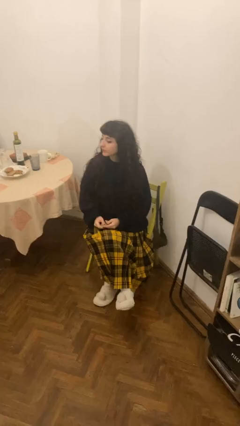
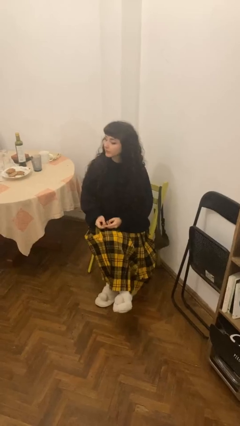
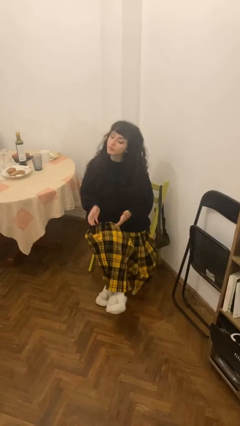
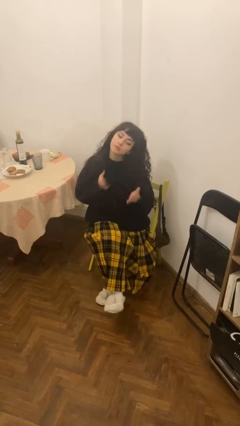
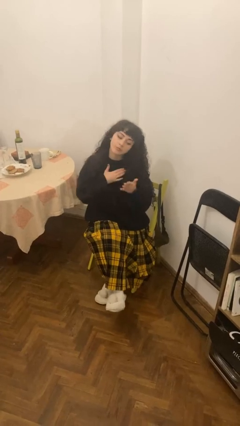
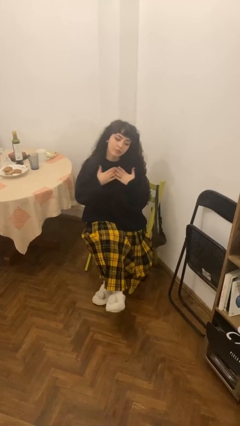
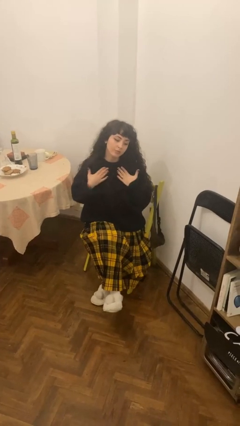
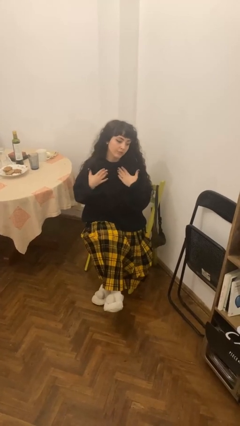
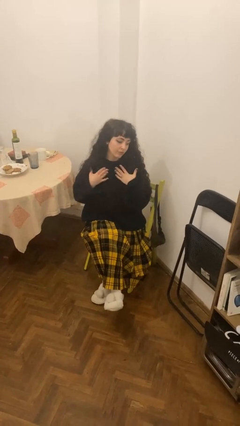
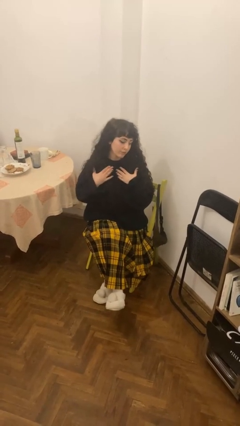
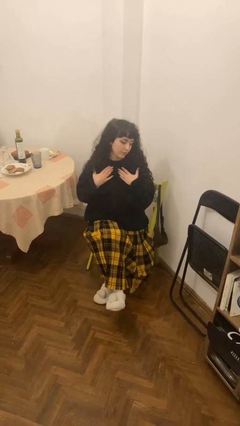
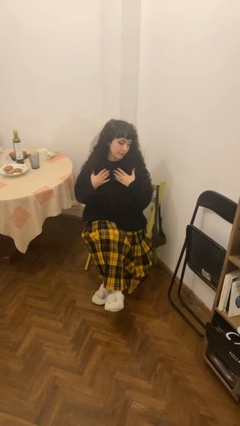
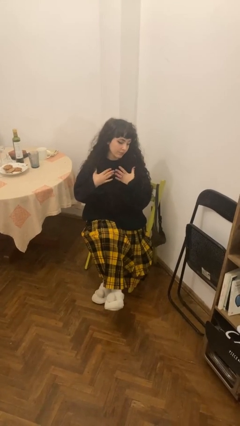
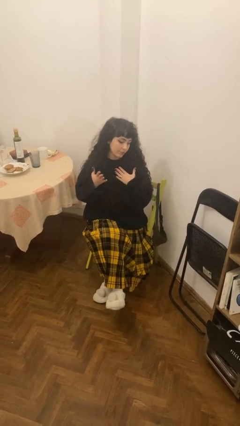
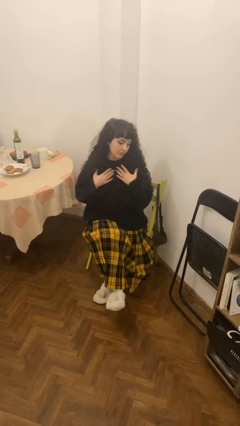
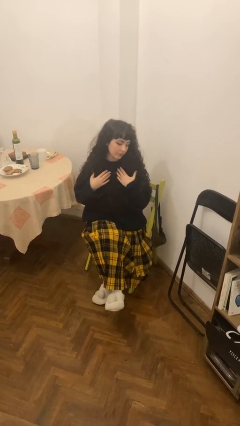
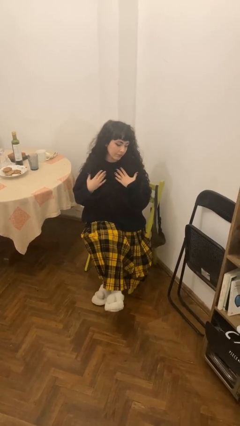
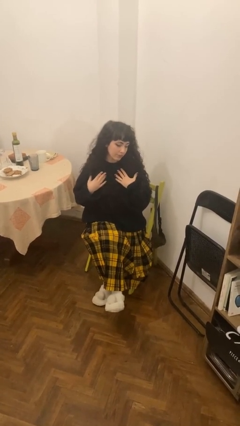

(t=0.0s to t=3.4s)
person drums on chest

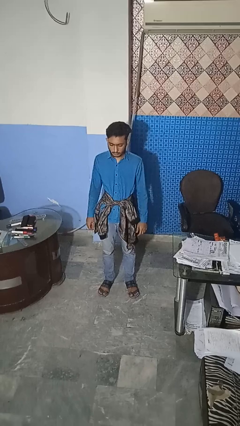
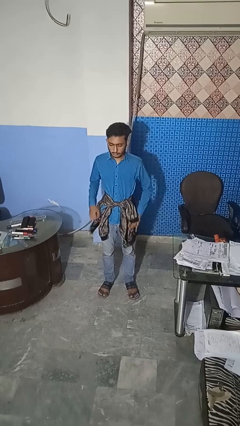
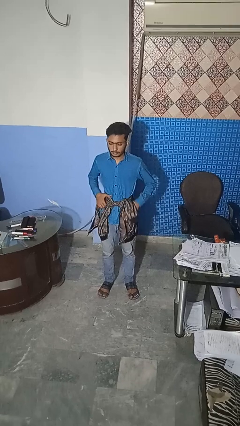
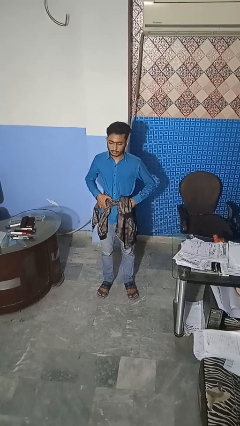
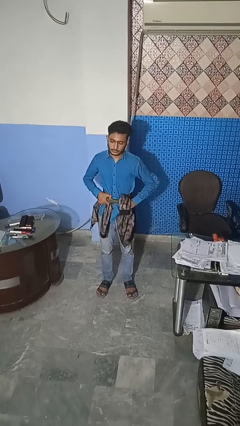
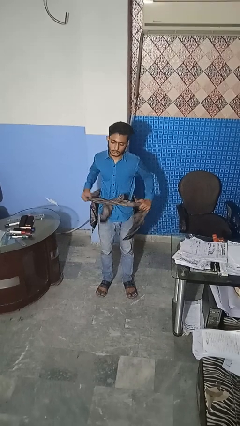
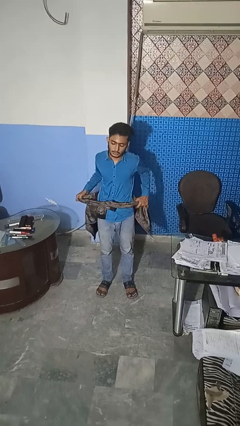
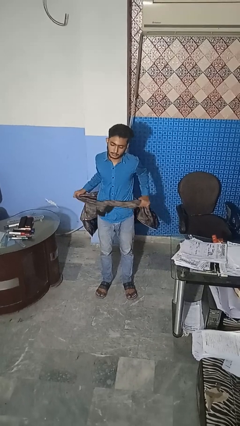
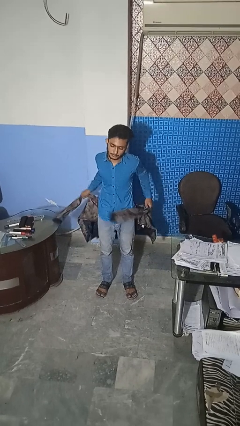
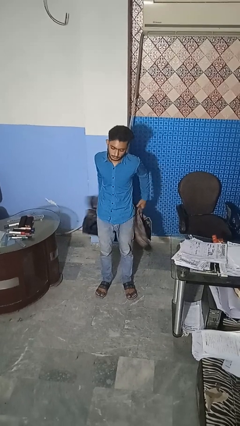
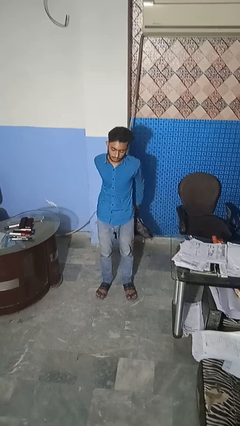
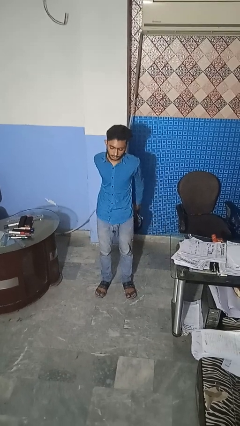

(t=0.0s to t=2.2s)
person unties jacket around waist

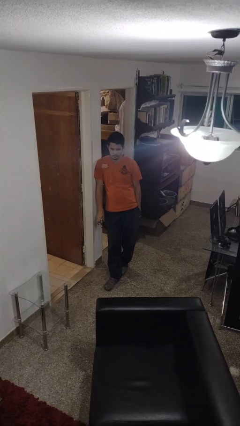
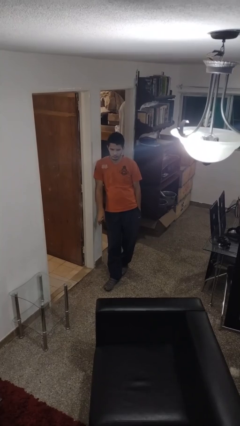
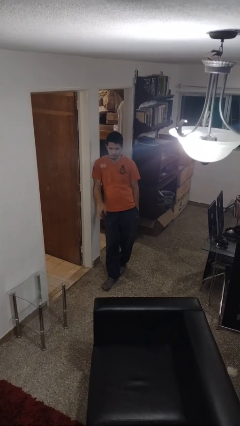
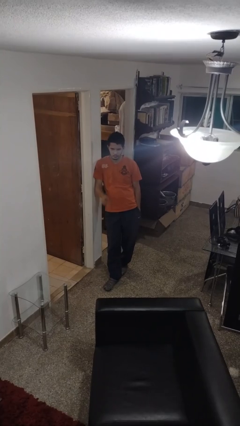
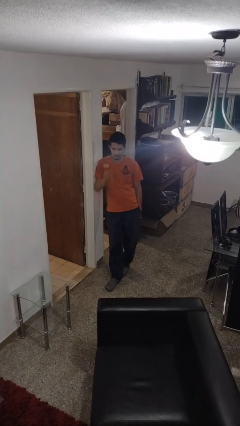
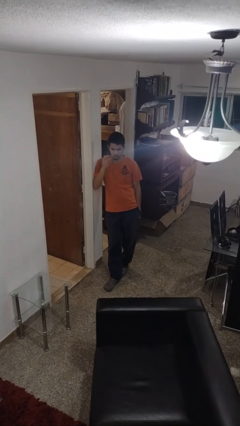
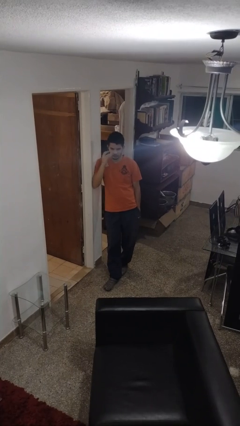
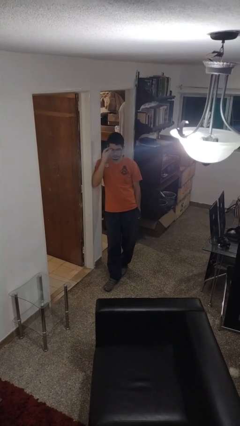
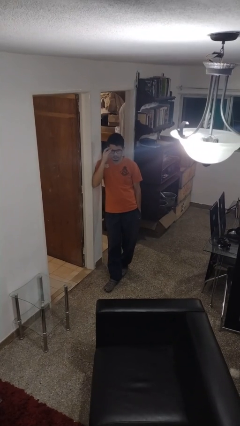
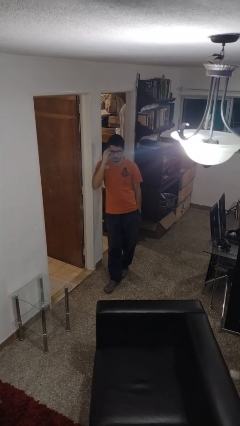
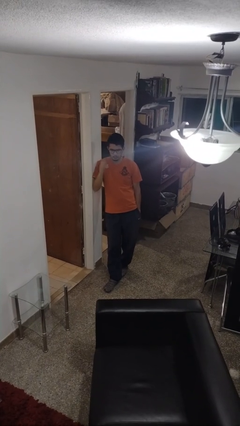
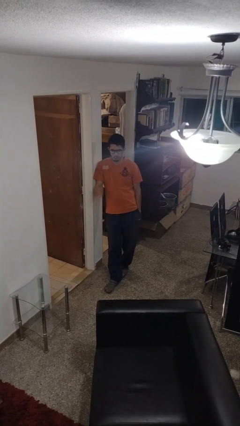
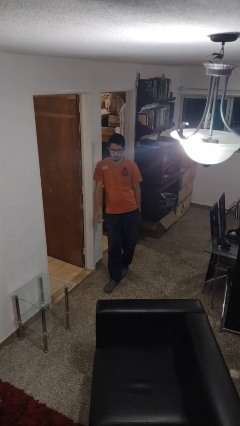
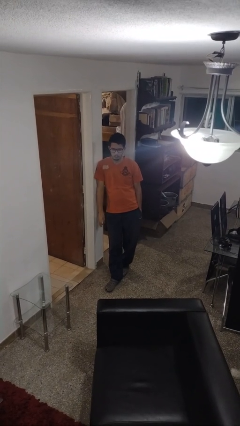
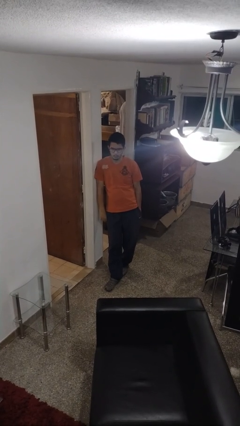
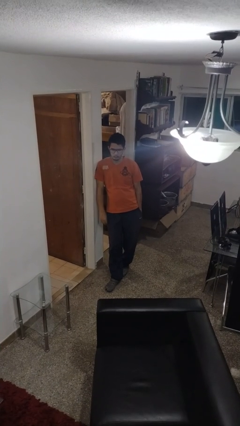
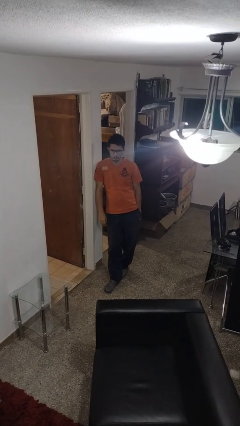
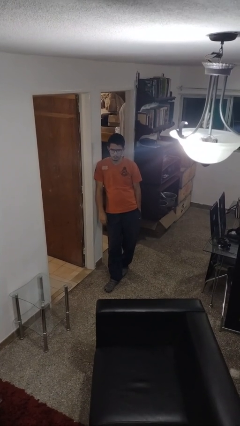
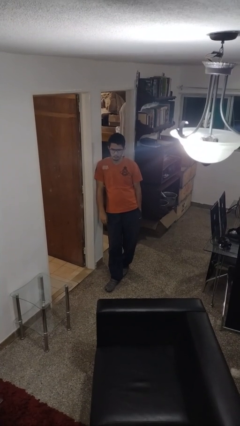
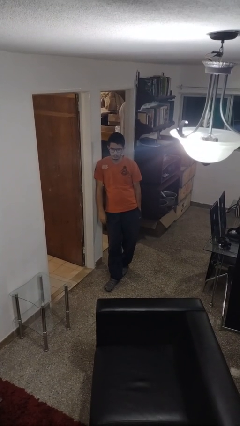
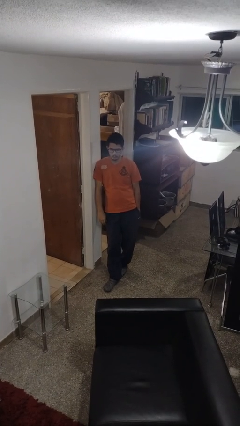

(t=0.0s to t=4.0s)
person puts on glasses

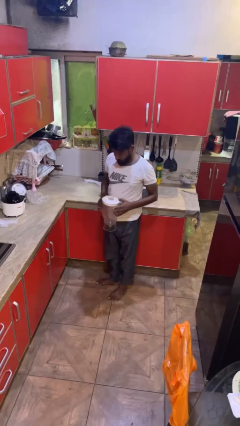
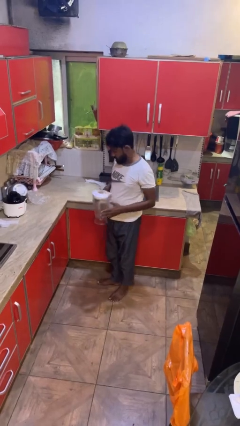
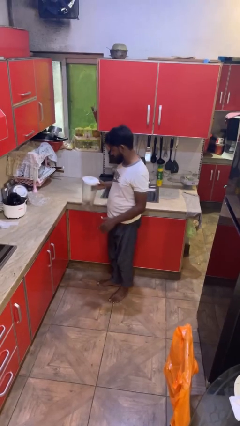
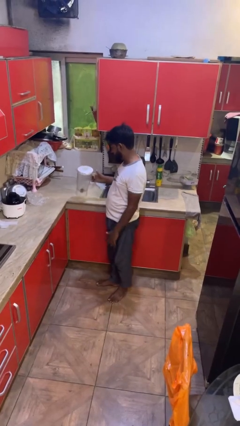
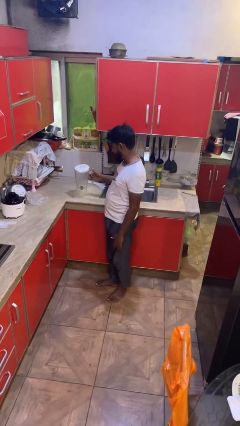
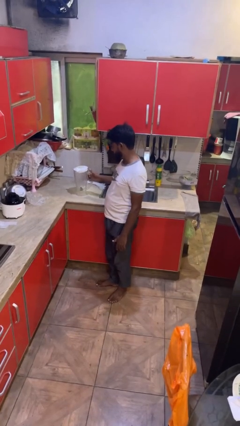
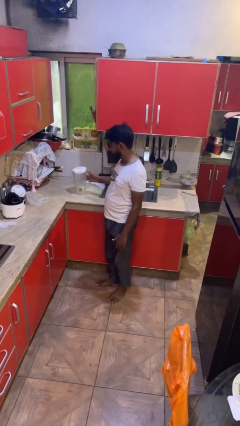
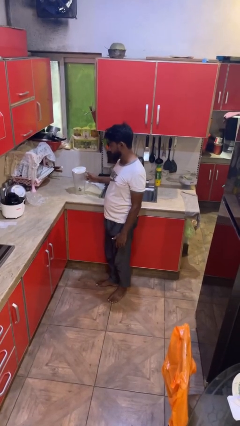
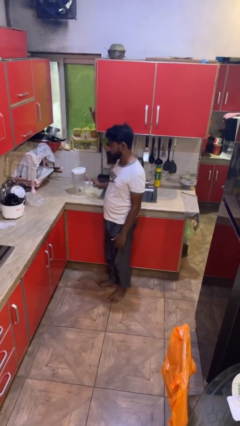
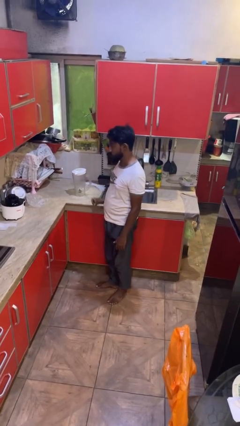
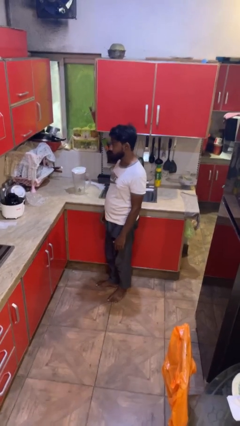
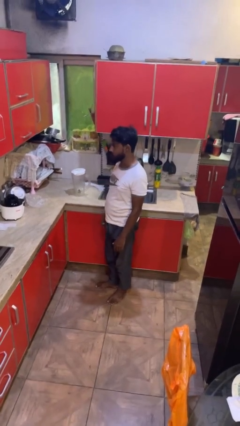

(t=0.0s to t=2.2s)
person puts down object on countertop

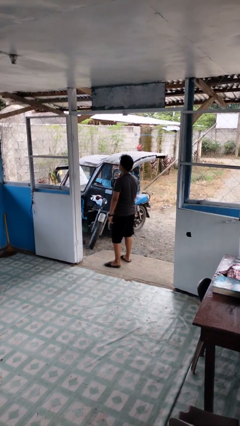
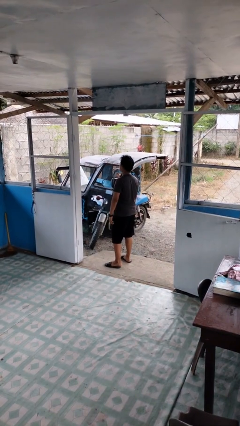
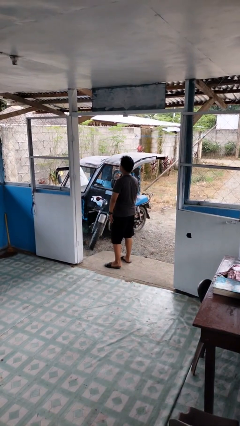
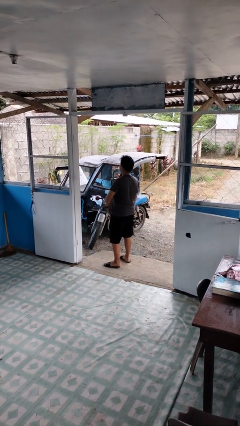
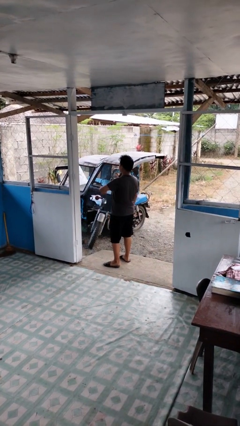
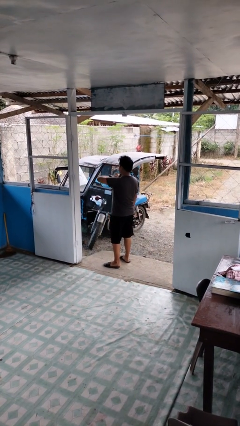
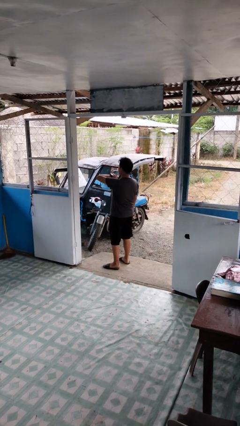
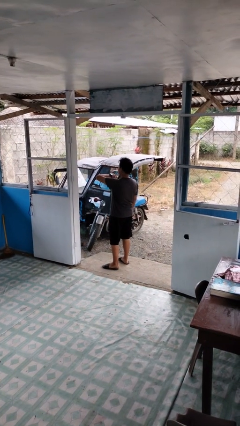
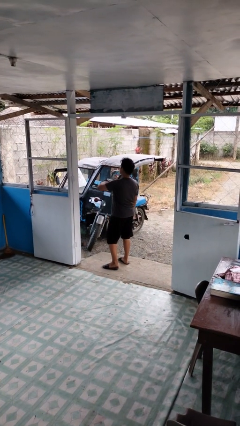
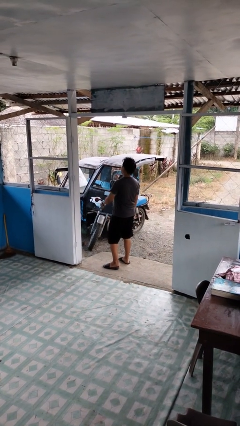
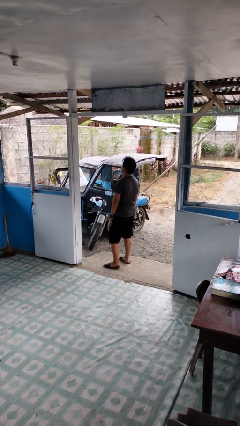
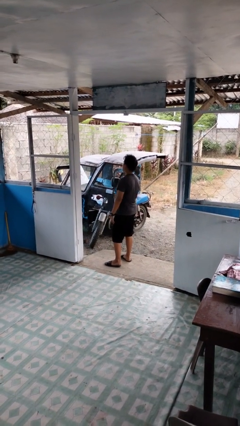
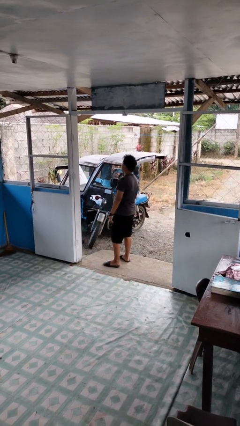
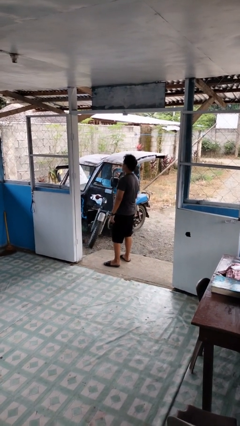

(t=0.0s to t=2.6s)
person looks at wristwatch

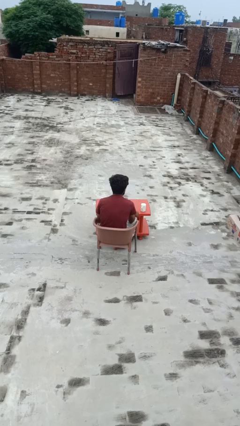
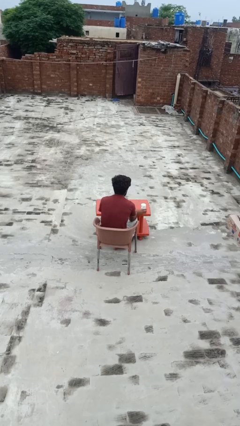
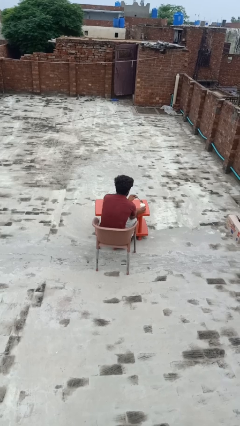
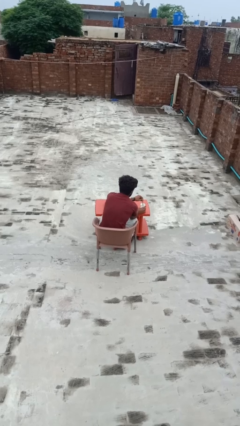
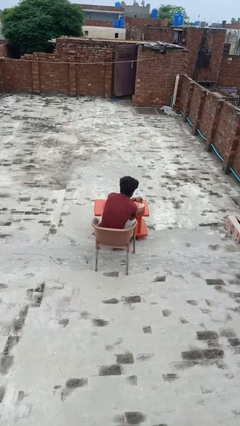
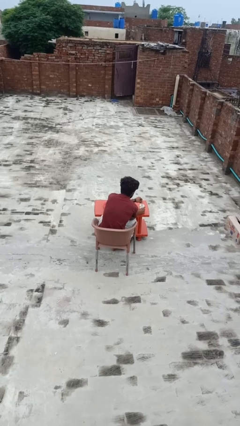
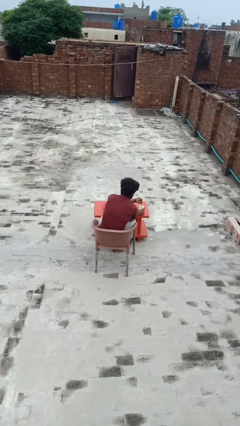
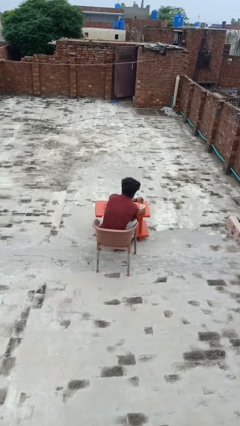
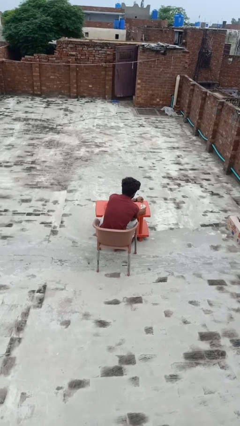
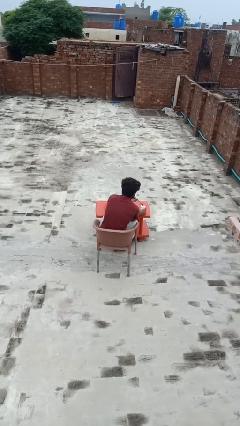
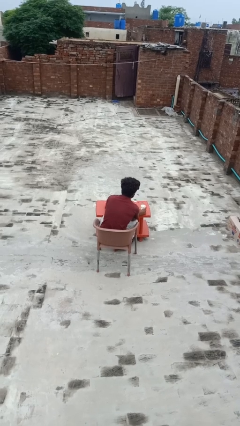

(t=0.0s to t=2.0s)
person stirs mug

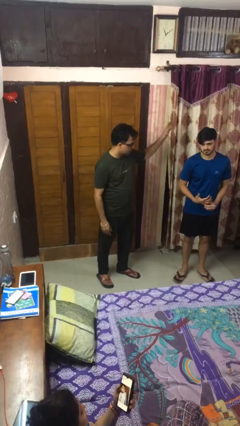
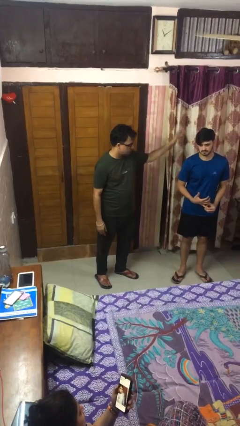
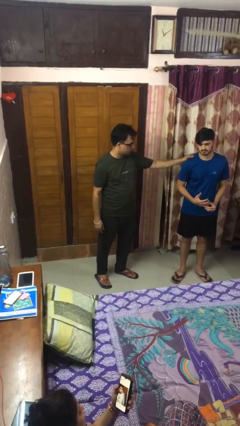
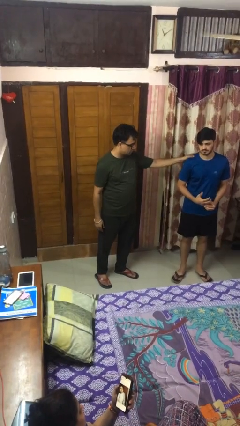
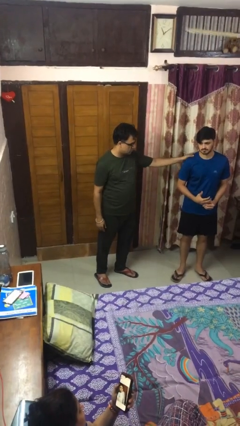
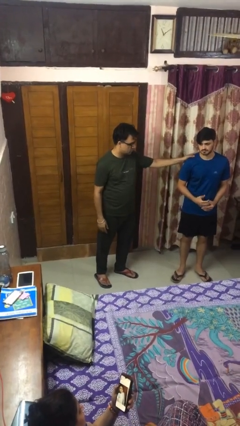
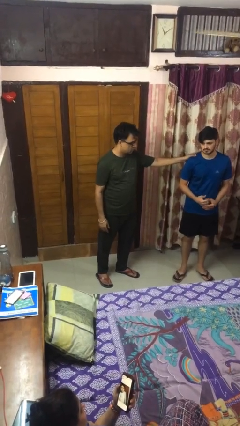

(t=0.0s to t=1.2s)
person pounds shoulders of person
